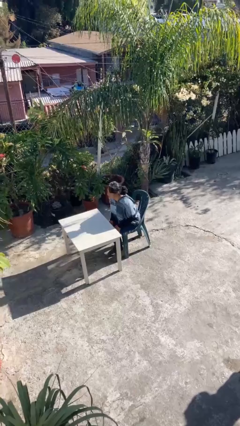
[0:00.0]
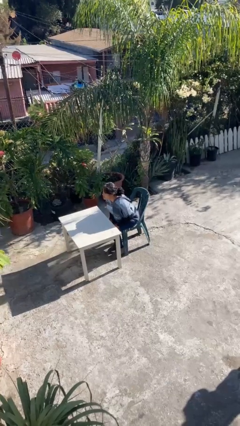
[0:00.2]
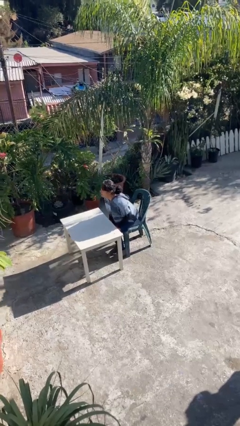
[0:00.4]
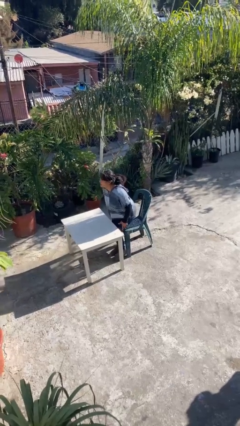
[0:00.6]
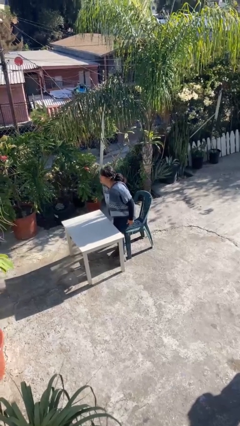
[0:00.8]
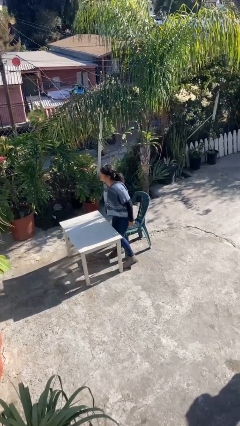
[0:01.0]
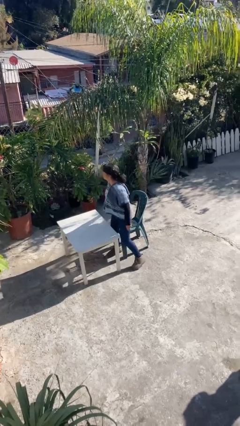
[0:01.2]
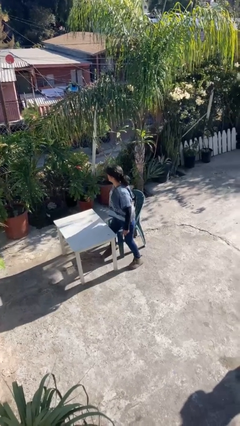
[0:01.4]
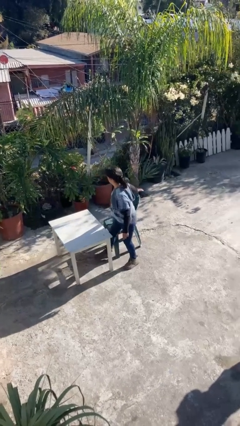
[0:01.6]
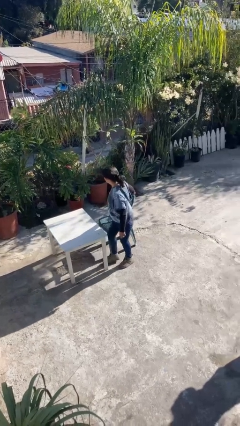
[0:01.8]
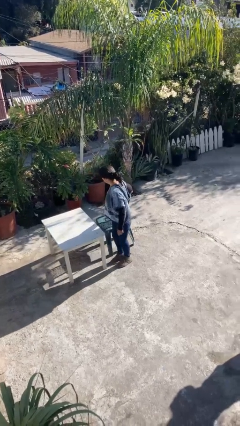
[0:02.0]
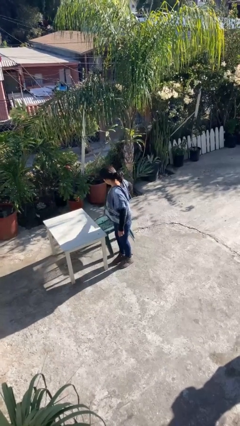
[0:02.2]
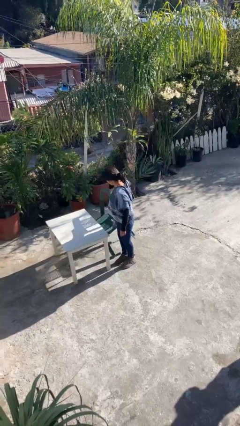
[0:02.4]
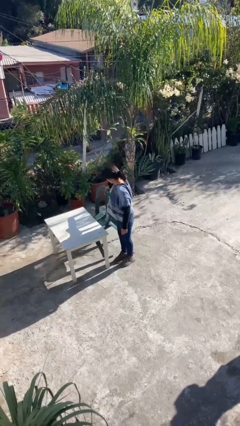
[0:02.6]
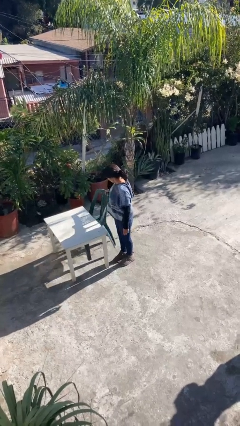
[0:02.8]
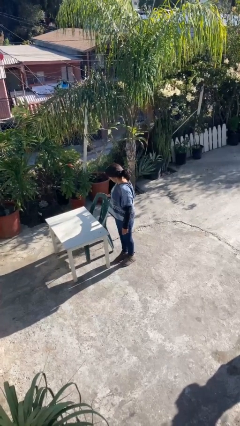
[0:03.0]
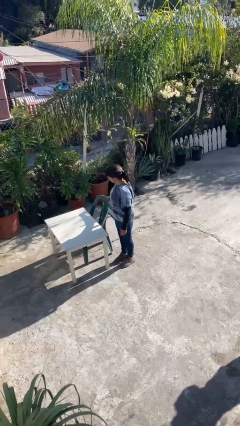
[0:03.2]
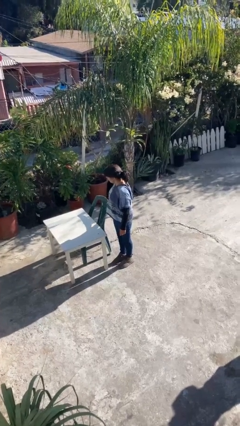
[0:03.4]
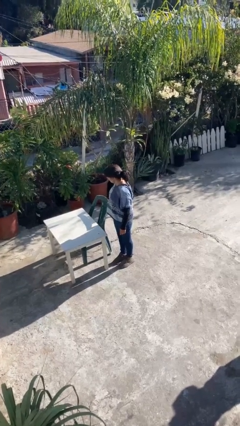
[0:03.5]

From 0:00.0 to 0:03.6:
person stands up

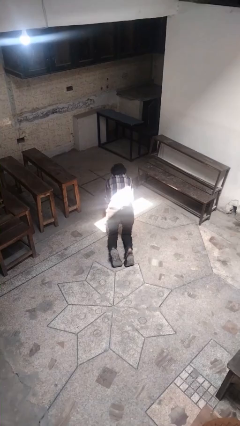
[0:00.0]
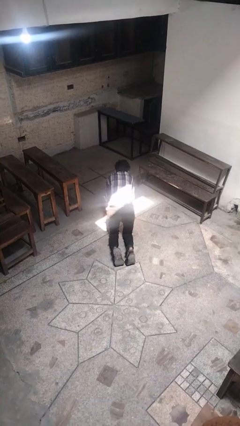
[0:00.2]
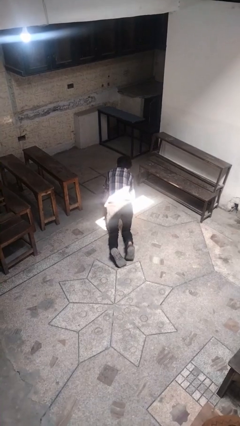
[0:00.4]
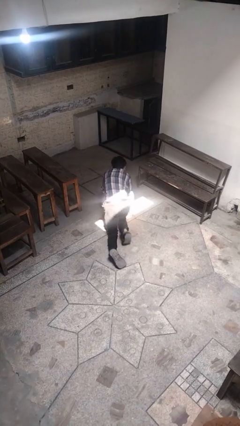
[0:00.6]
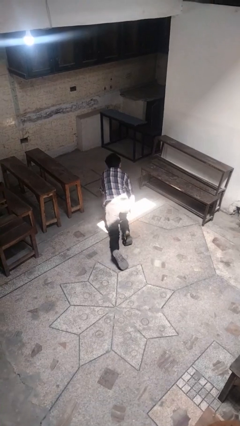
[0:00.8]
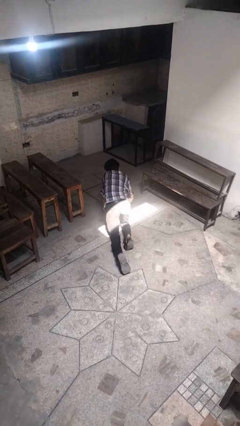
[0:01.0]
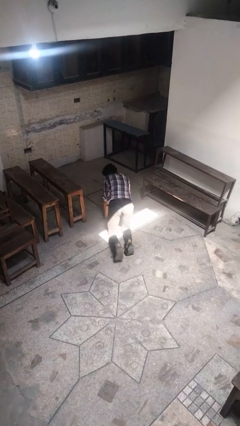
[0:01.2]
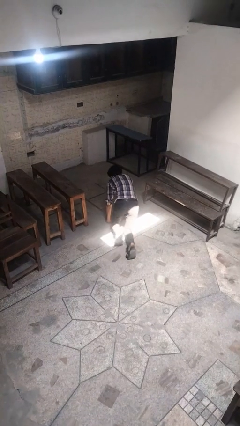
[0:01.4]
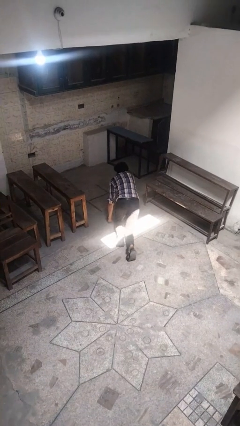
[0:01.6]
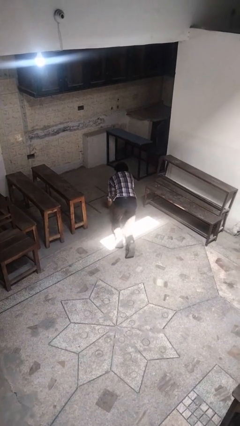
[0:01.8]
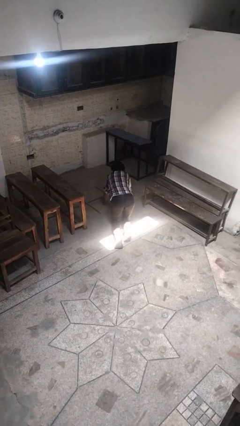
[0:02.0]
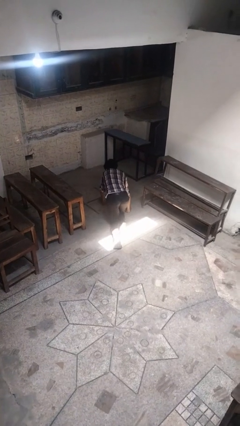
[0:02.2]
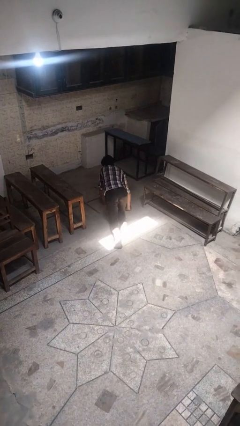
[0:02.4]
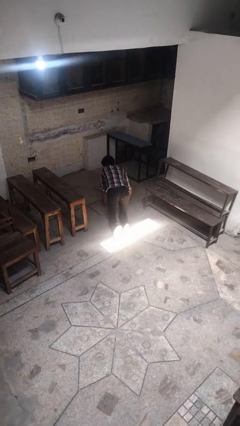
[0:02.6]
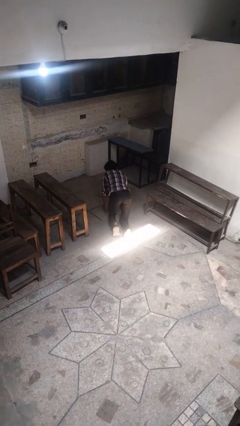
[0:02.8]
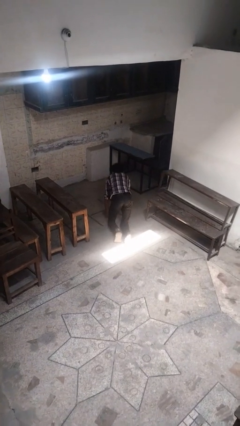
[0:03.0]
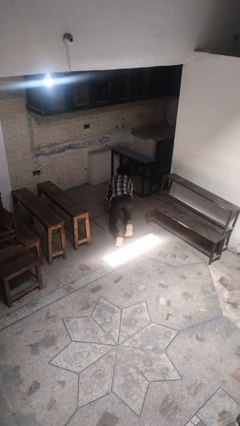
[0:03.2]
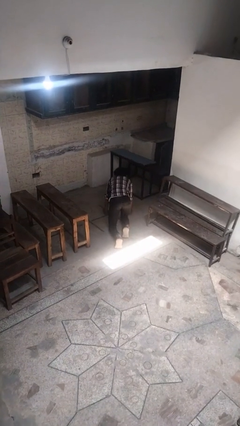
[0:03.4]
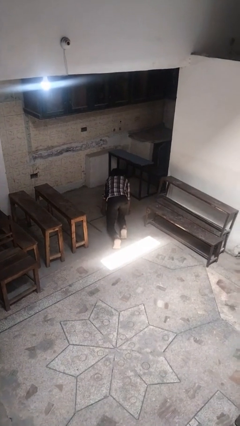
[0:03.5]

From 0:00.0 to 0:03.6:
person crawls

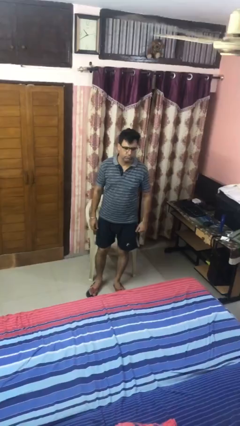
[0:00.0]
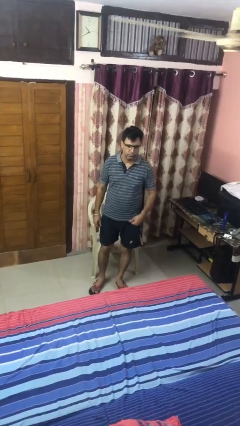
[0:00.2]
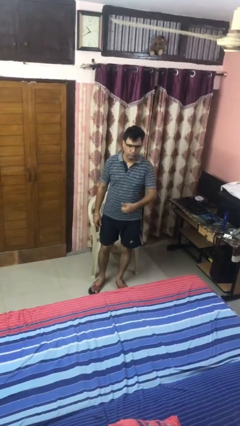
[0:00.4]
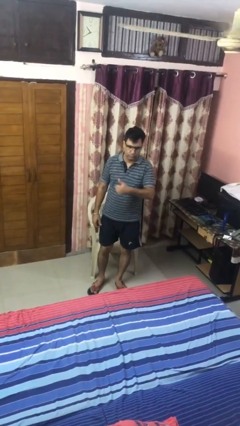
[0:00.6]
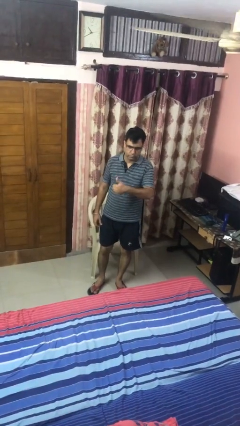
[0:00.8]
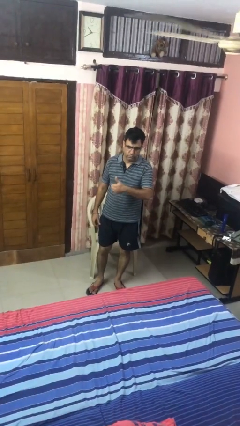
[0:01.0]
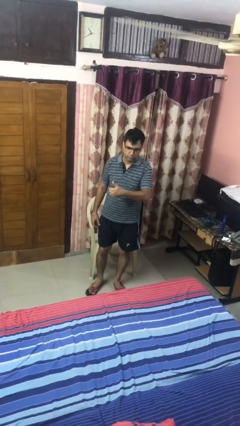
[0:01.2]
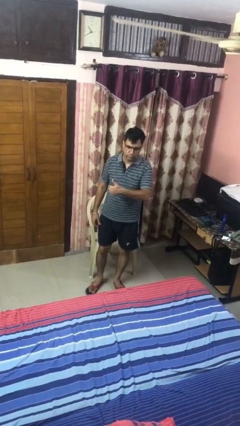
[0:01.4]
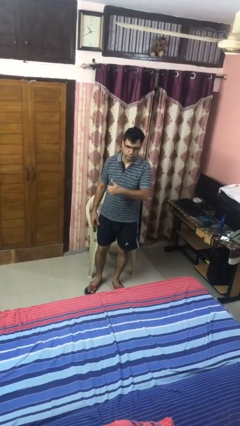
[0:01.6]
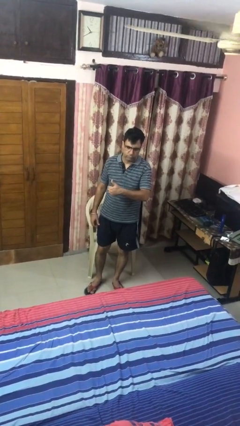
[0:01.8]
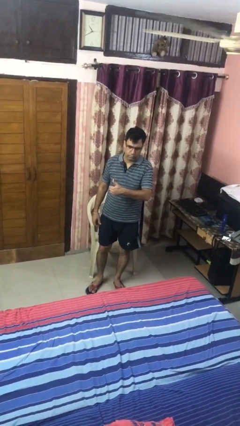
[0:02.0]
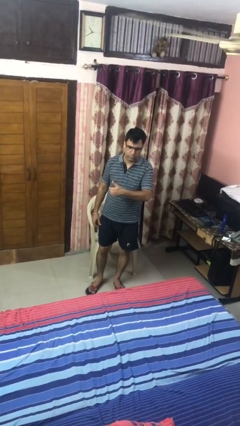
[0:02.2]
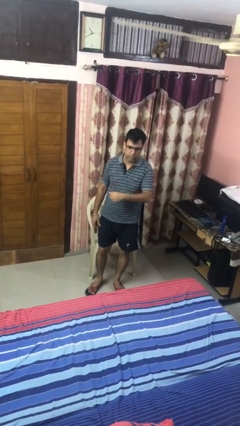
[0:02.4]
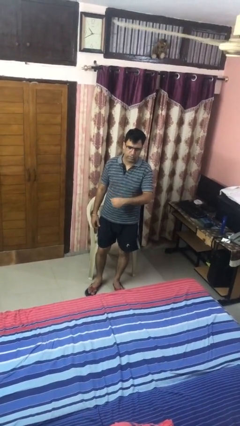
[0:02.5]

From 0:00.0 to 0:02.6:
person gestures thumbs up

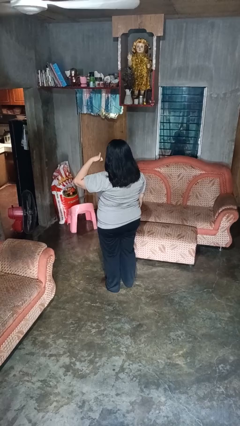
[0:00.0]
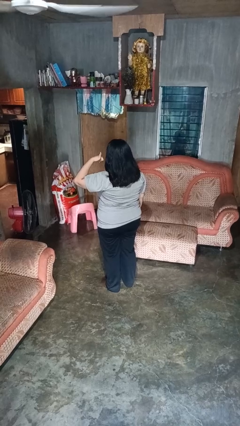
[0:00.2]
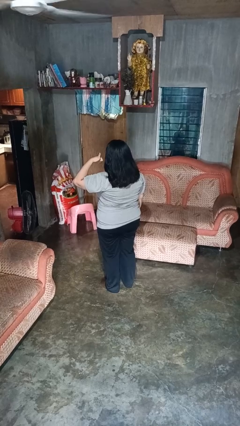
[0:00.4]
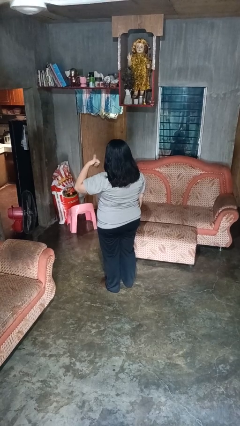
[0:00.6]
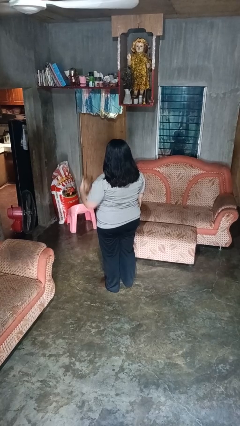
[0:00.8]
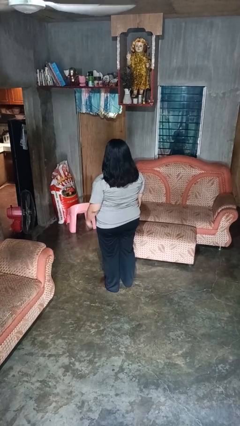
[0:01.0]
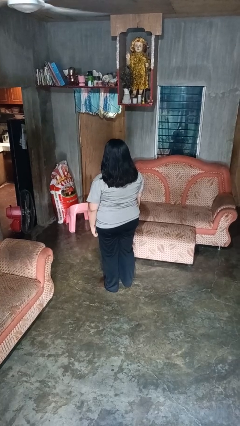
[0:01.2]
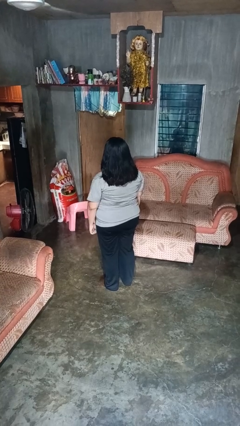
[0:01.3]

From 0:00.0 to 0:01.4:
person gestures call me

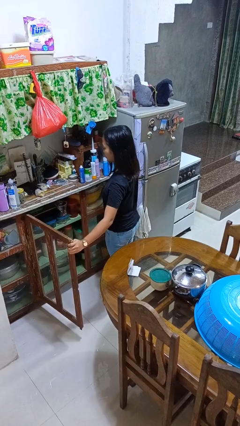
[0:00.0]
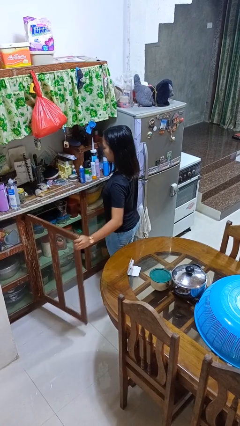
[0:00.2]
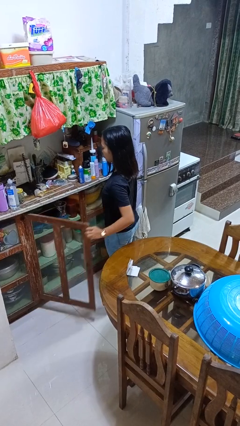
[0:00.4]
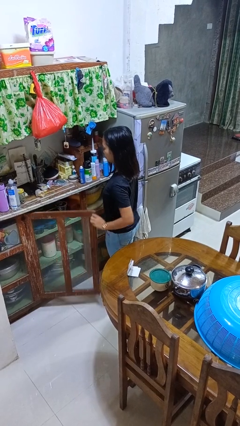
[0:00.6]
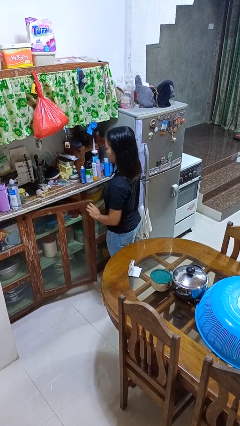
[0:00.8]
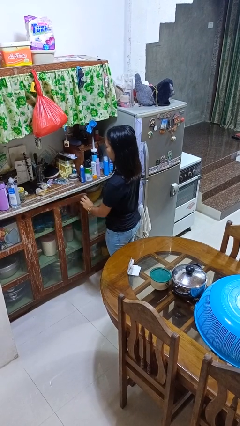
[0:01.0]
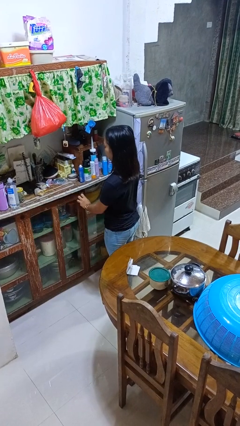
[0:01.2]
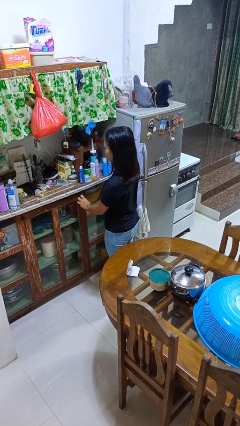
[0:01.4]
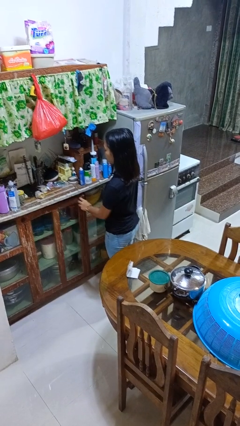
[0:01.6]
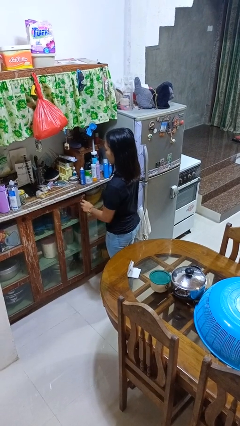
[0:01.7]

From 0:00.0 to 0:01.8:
person closes cabinet

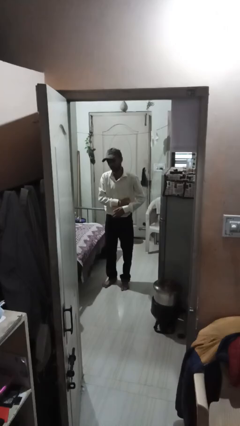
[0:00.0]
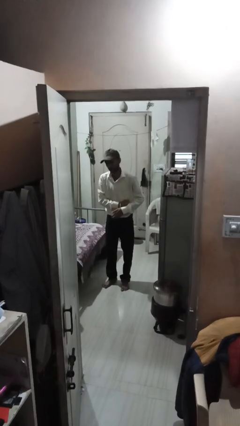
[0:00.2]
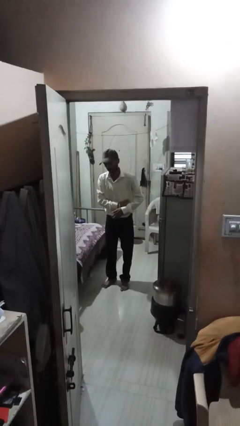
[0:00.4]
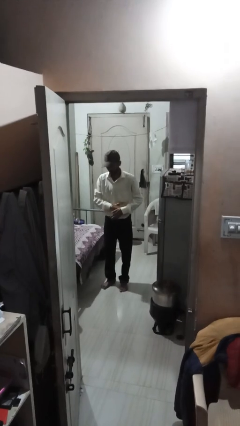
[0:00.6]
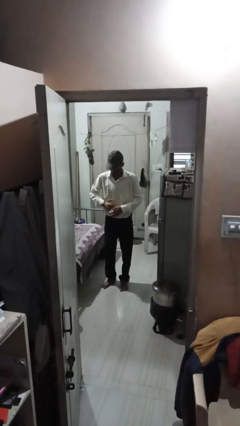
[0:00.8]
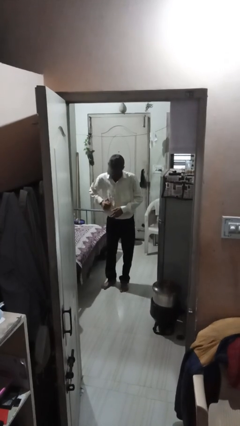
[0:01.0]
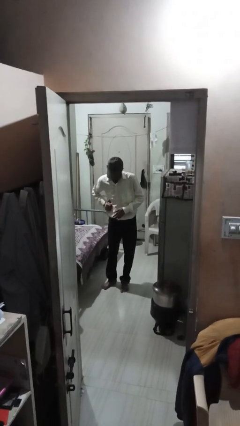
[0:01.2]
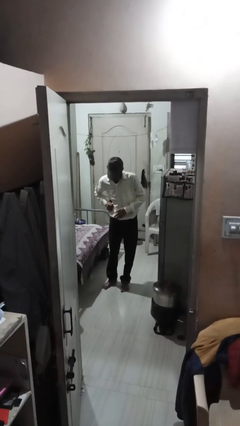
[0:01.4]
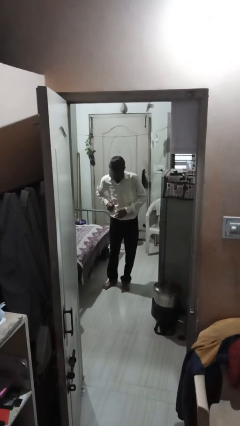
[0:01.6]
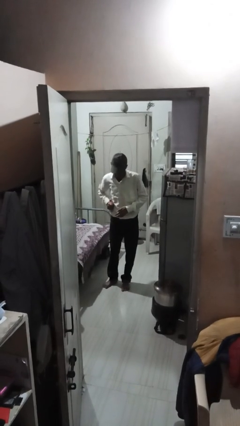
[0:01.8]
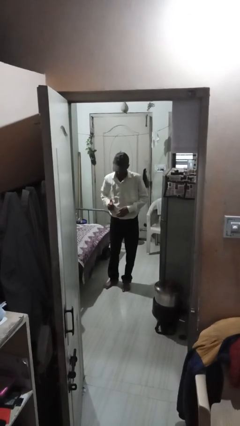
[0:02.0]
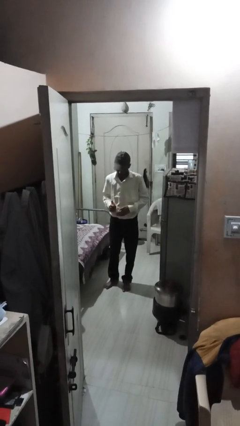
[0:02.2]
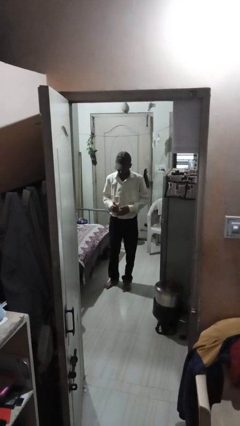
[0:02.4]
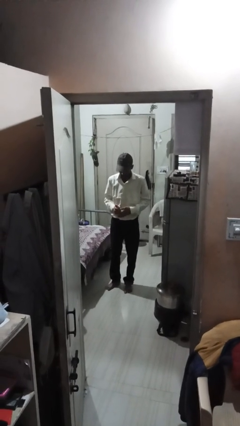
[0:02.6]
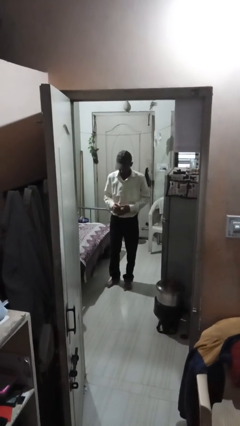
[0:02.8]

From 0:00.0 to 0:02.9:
person applies deodorant

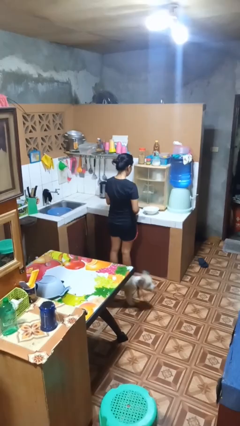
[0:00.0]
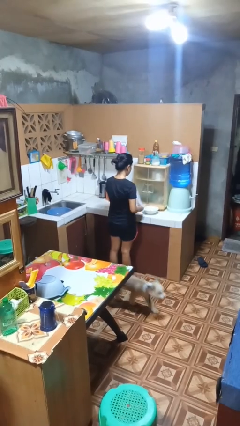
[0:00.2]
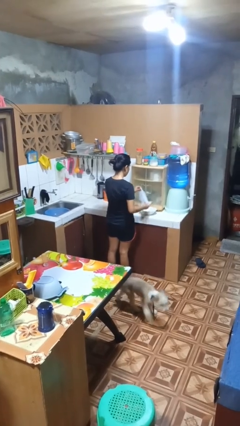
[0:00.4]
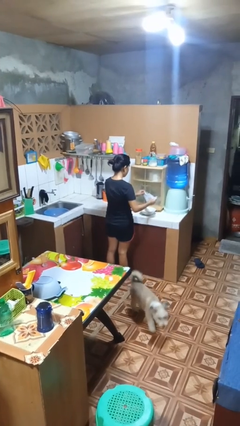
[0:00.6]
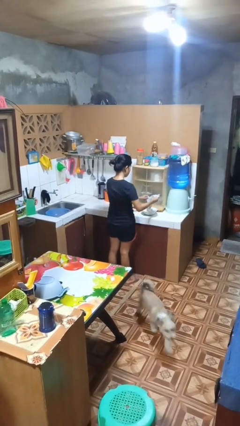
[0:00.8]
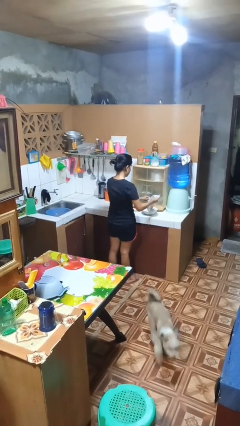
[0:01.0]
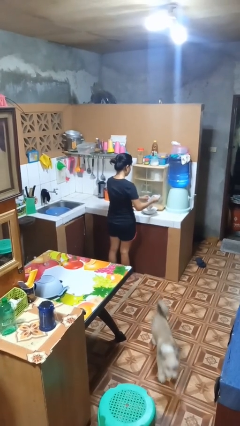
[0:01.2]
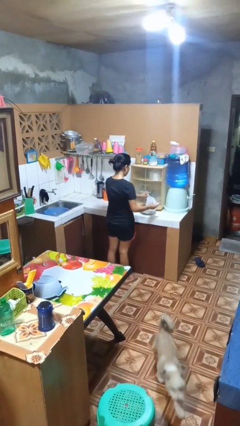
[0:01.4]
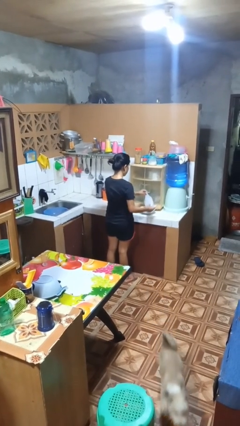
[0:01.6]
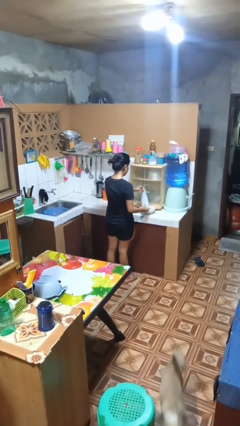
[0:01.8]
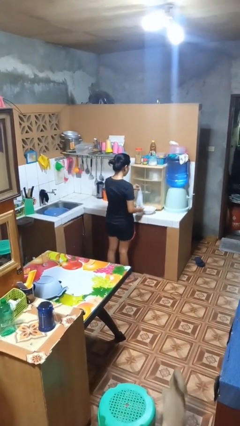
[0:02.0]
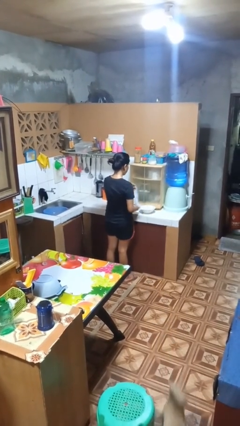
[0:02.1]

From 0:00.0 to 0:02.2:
person pours into bowl
